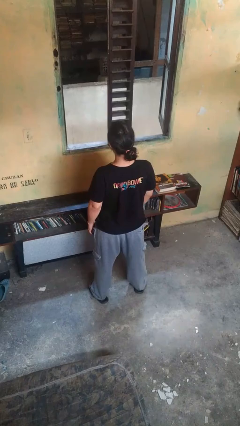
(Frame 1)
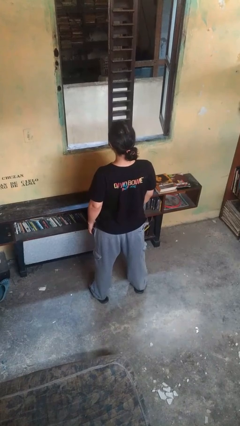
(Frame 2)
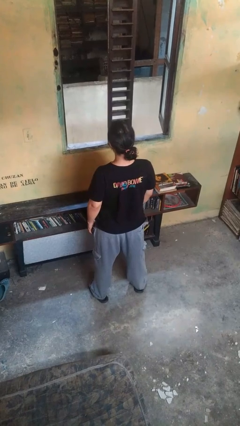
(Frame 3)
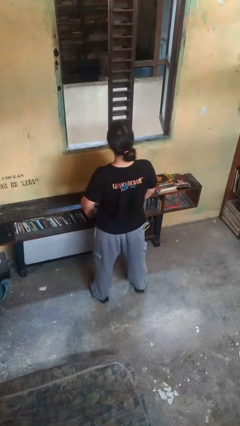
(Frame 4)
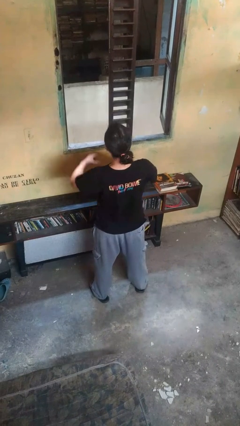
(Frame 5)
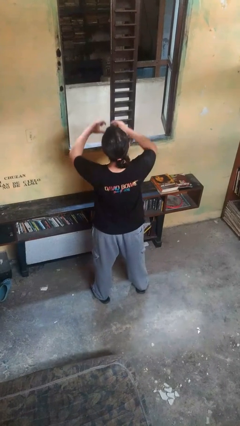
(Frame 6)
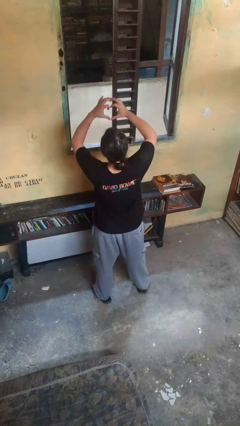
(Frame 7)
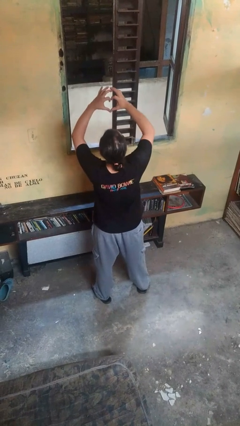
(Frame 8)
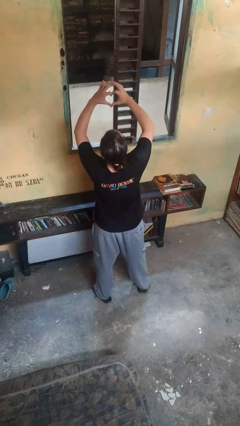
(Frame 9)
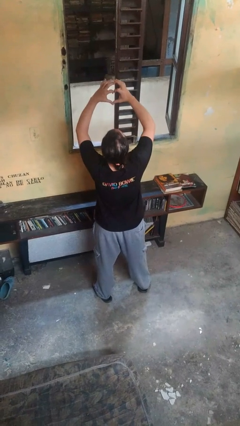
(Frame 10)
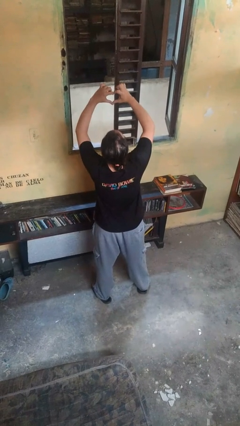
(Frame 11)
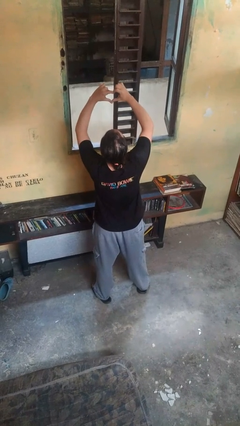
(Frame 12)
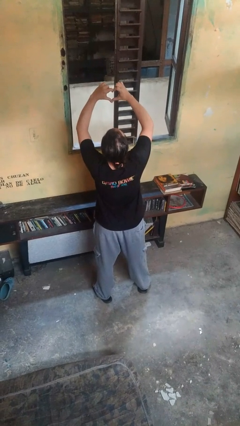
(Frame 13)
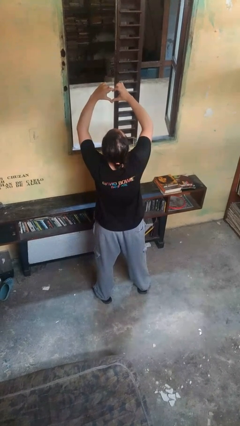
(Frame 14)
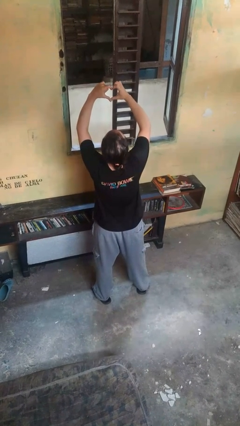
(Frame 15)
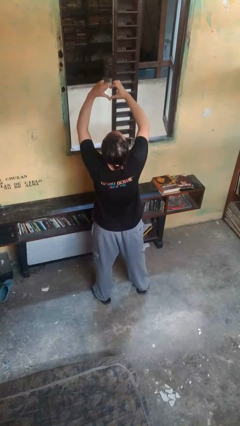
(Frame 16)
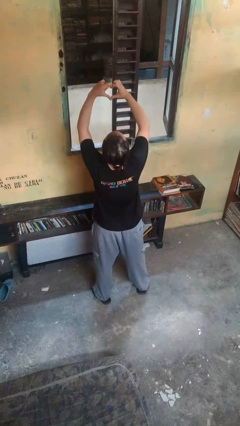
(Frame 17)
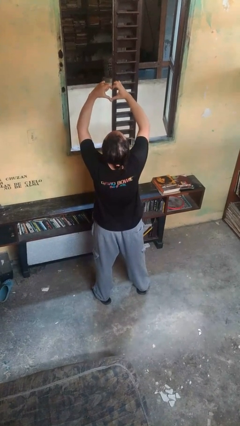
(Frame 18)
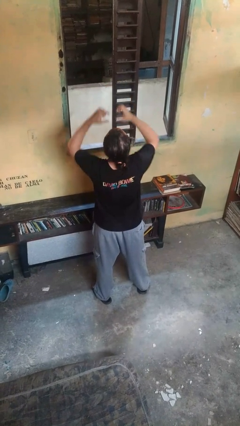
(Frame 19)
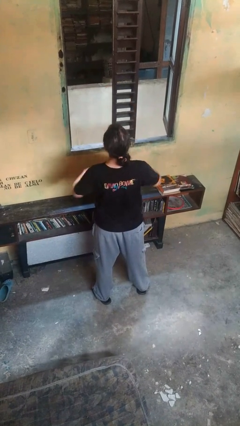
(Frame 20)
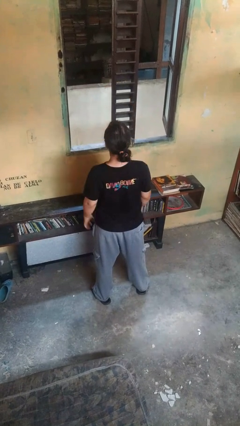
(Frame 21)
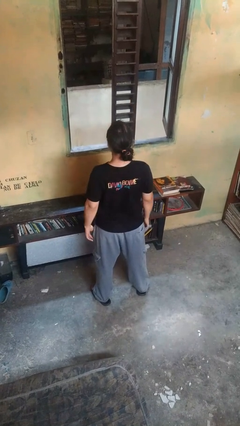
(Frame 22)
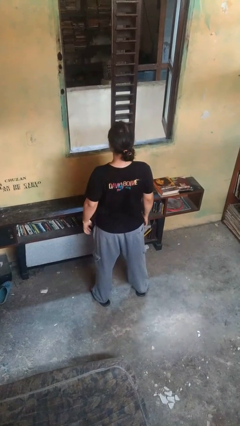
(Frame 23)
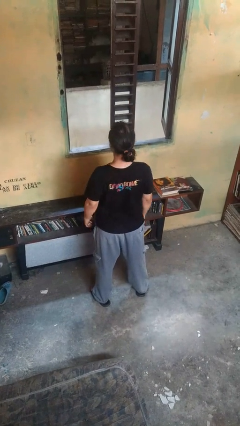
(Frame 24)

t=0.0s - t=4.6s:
person gestures heart

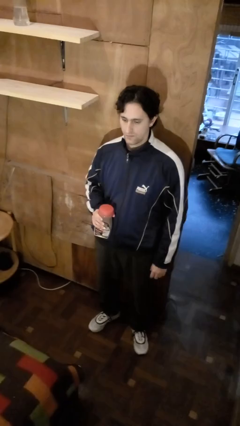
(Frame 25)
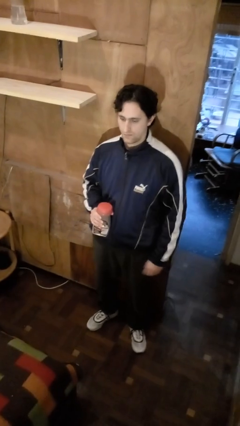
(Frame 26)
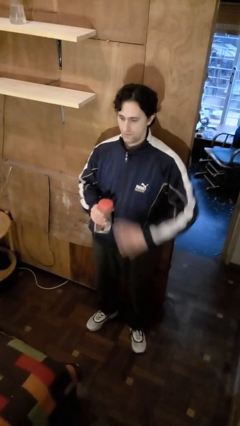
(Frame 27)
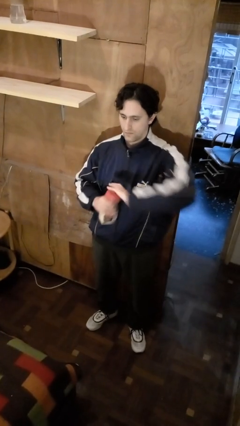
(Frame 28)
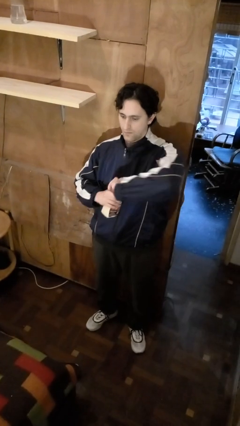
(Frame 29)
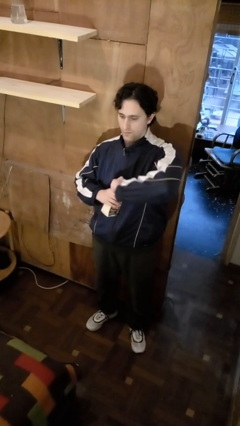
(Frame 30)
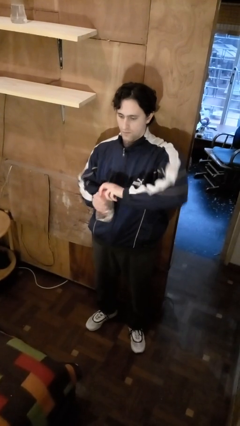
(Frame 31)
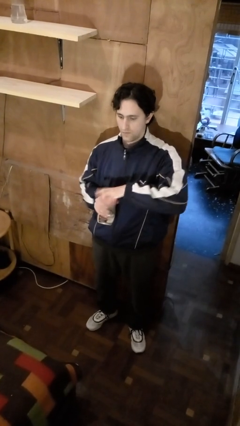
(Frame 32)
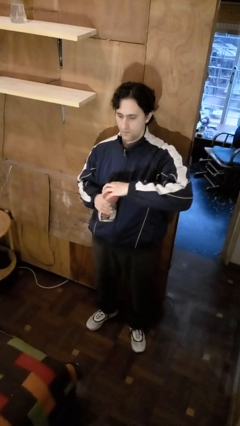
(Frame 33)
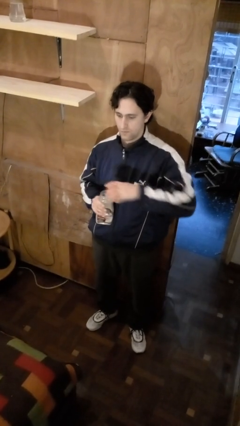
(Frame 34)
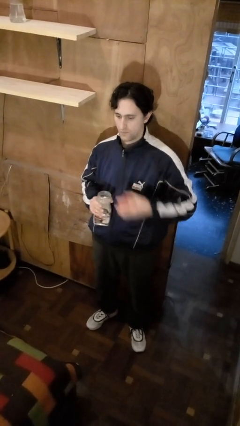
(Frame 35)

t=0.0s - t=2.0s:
person opens jar

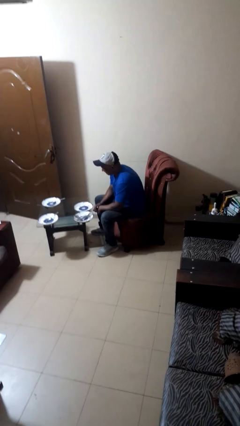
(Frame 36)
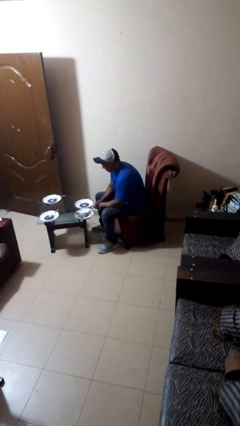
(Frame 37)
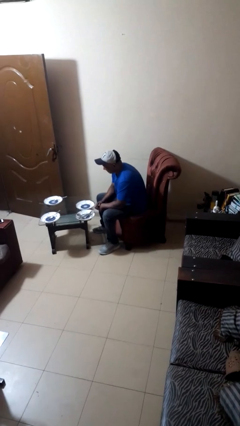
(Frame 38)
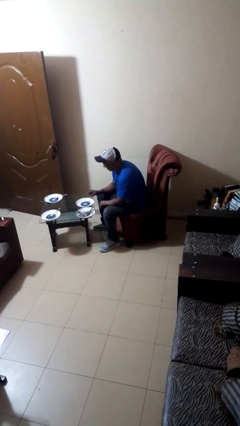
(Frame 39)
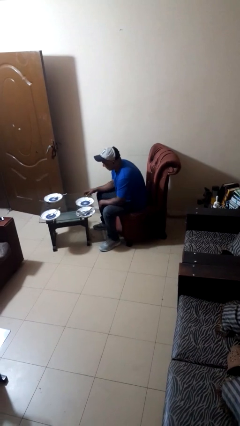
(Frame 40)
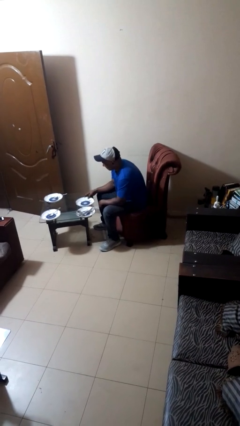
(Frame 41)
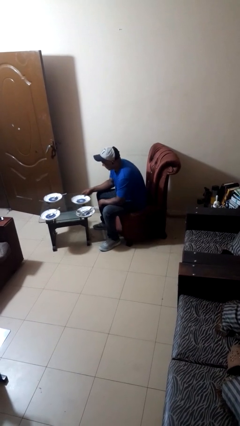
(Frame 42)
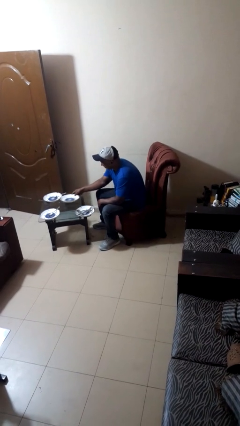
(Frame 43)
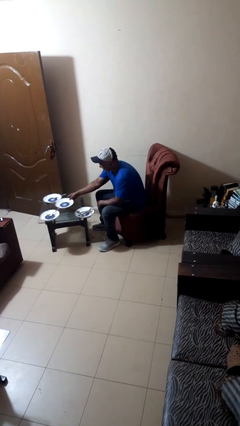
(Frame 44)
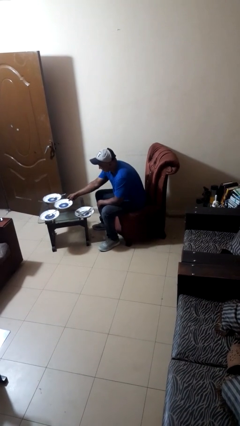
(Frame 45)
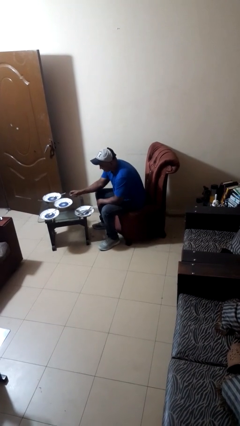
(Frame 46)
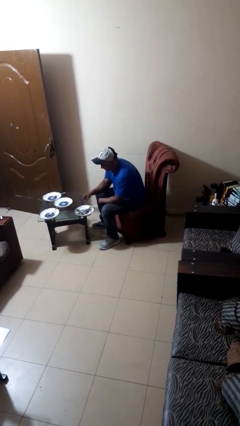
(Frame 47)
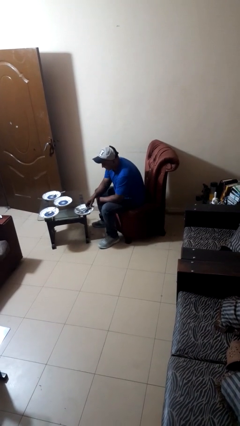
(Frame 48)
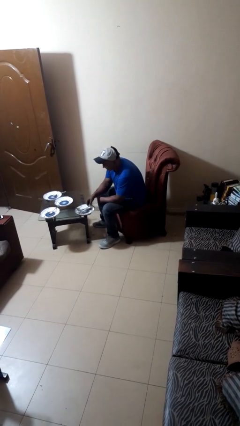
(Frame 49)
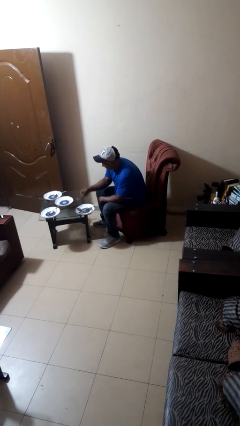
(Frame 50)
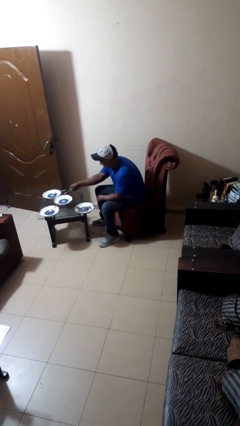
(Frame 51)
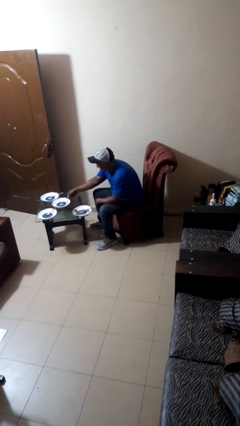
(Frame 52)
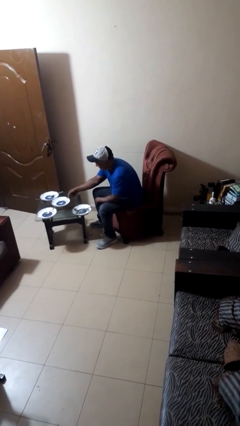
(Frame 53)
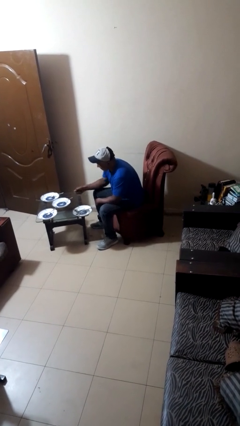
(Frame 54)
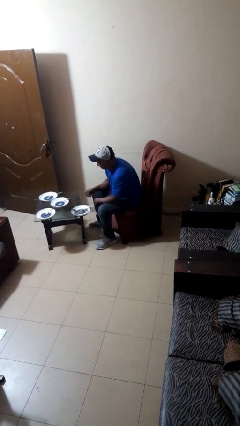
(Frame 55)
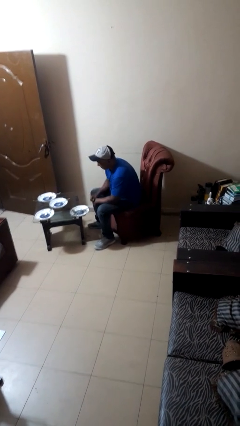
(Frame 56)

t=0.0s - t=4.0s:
person sets table

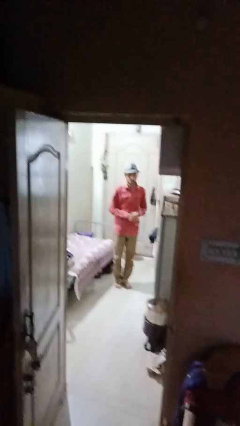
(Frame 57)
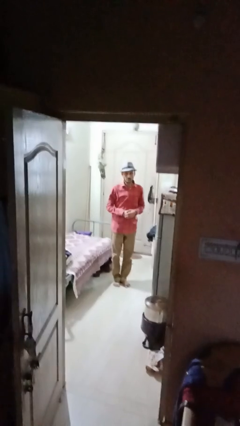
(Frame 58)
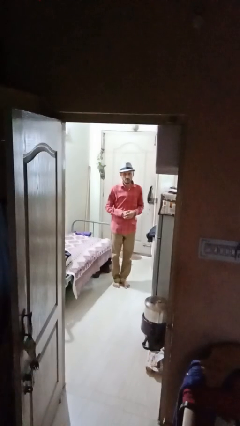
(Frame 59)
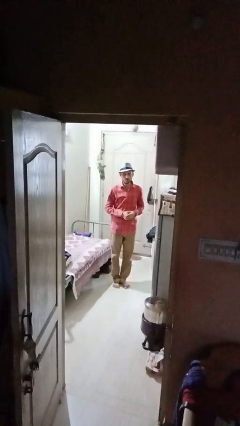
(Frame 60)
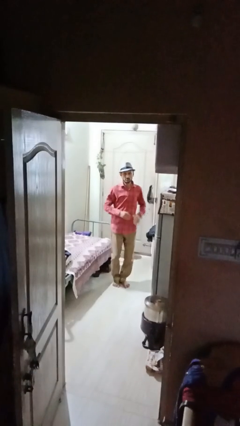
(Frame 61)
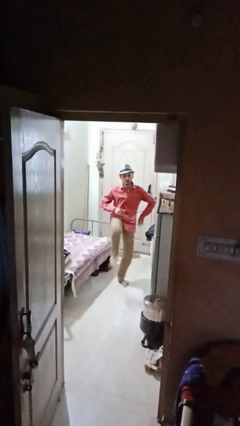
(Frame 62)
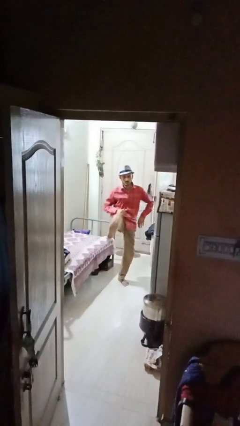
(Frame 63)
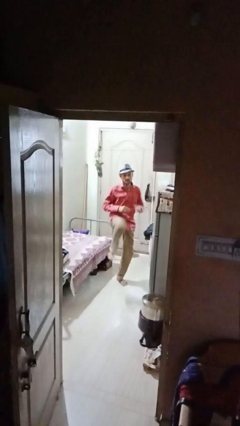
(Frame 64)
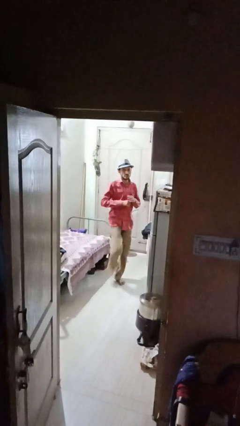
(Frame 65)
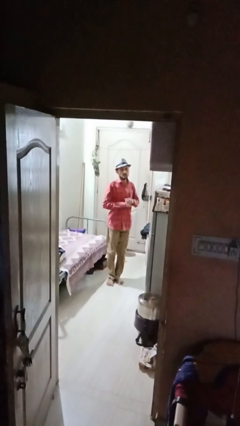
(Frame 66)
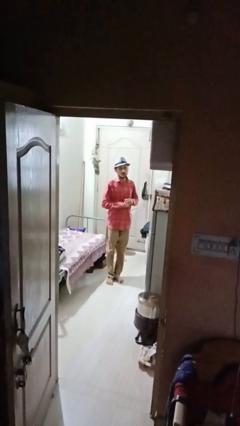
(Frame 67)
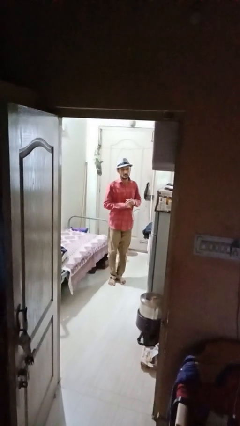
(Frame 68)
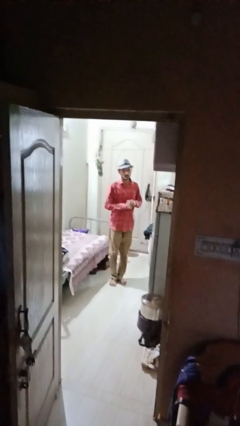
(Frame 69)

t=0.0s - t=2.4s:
person karate kicks

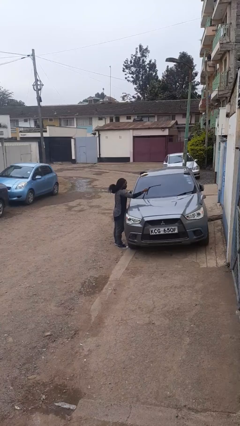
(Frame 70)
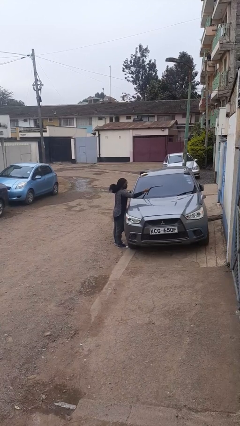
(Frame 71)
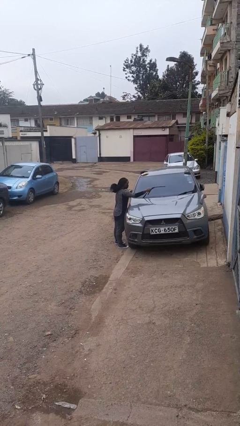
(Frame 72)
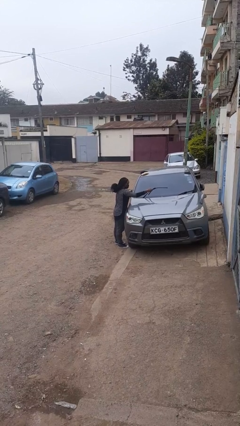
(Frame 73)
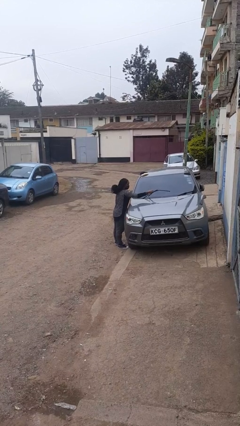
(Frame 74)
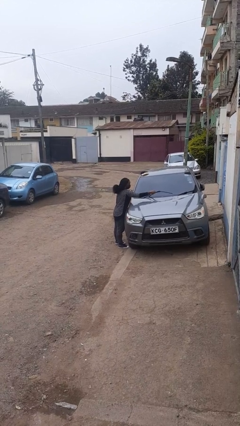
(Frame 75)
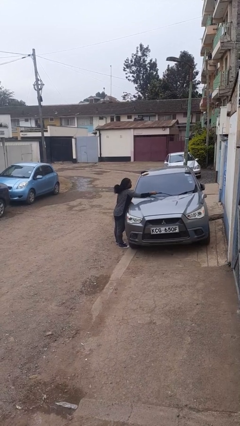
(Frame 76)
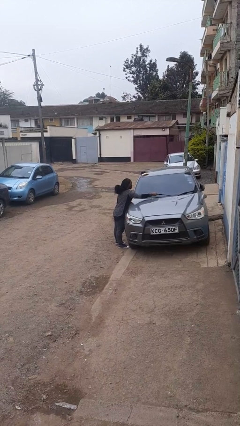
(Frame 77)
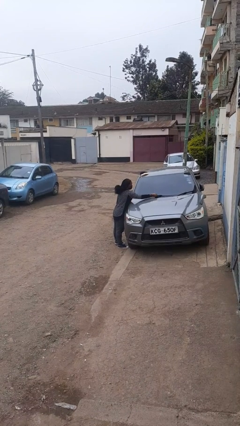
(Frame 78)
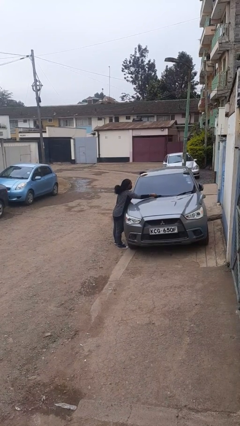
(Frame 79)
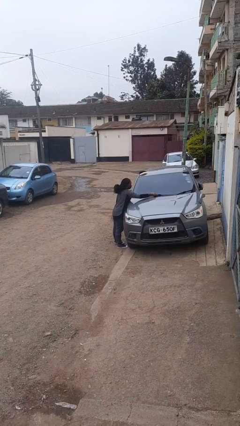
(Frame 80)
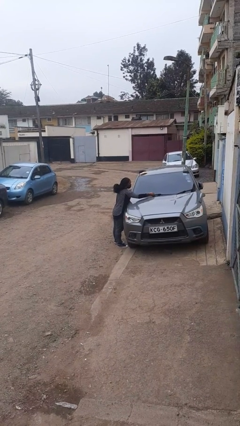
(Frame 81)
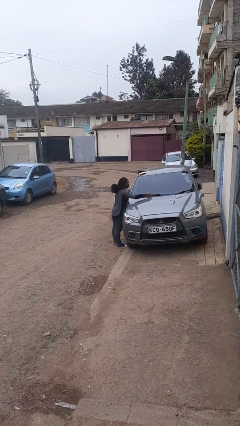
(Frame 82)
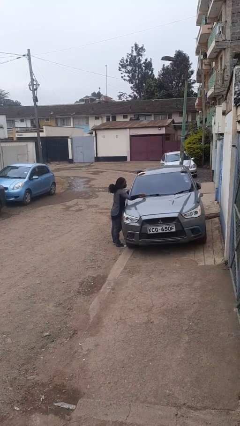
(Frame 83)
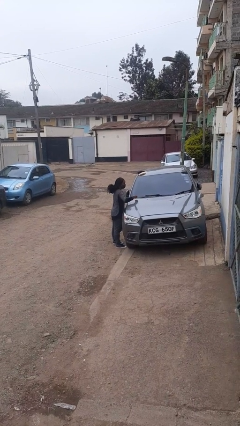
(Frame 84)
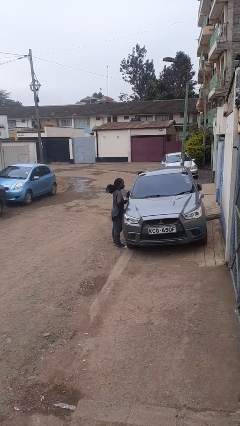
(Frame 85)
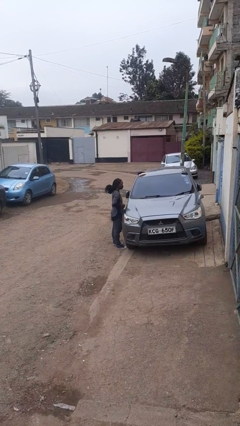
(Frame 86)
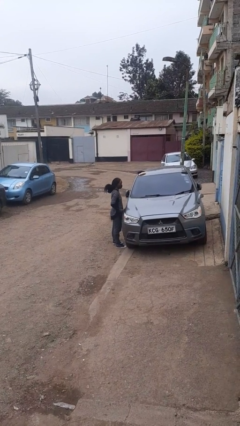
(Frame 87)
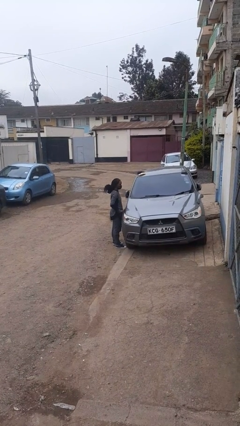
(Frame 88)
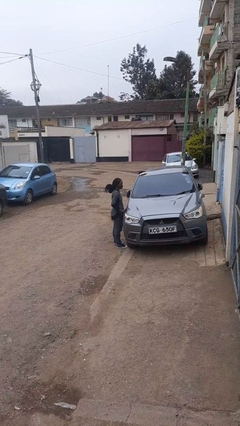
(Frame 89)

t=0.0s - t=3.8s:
person flips down car wipers

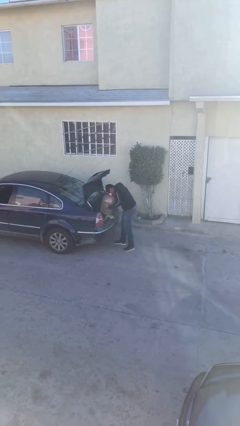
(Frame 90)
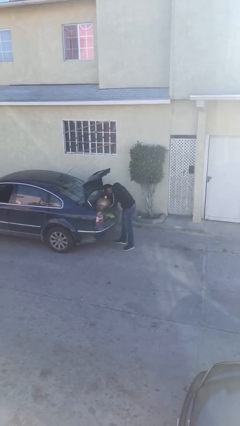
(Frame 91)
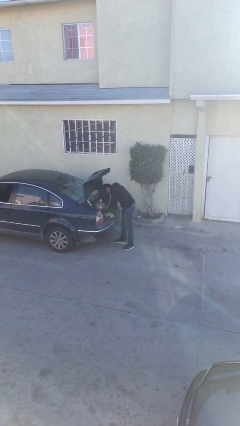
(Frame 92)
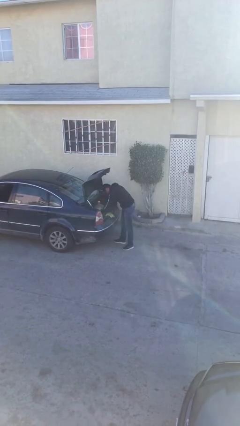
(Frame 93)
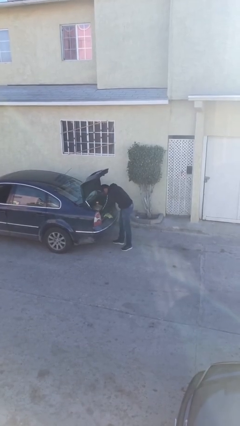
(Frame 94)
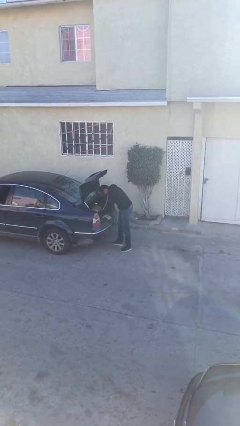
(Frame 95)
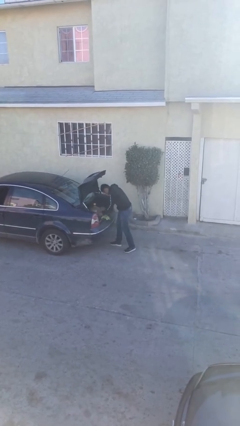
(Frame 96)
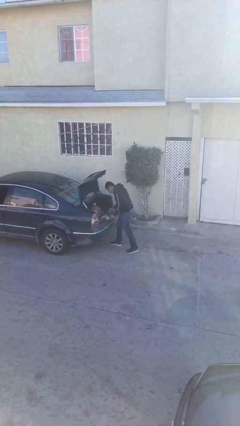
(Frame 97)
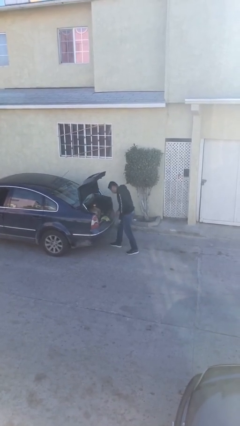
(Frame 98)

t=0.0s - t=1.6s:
person loads car
